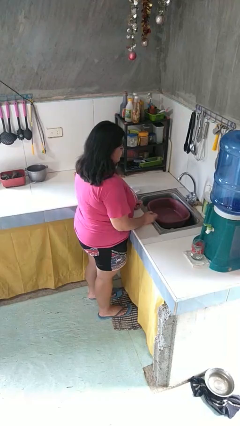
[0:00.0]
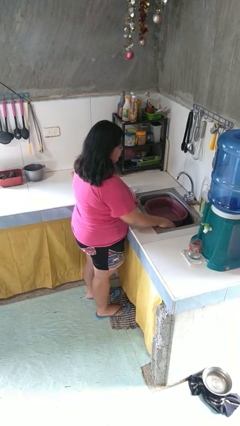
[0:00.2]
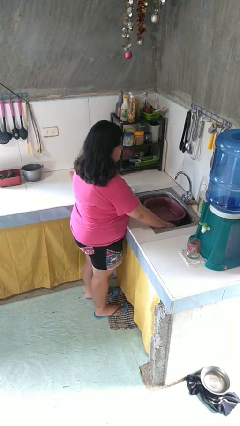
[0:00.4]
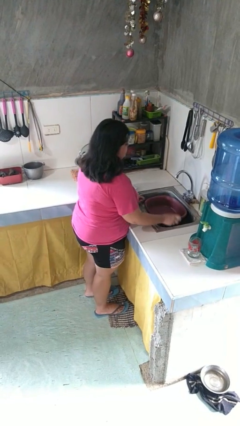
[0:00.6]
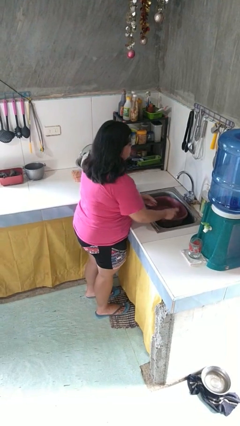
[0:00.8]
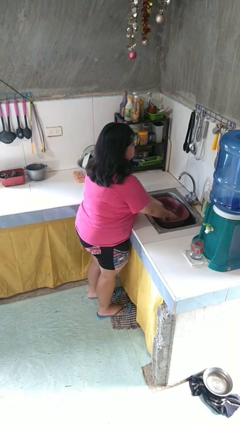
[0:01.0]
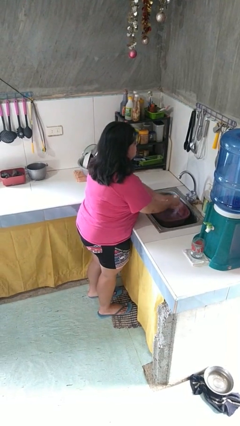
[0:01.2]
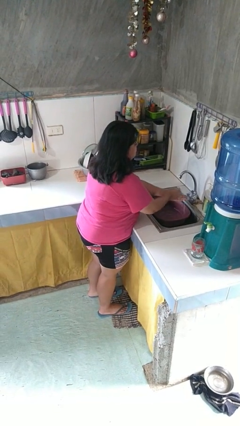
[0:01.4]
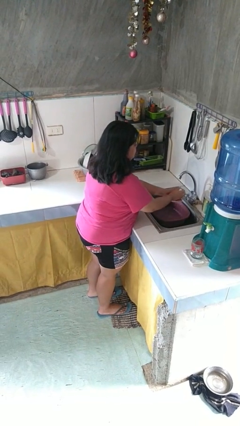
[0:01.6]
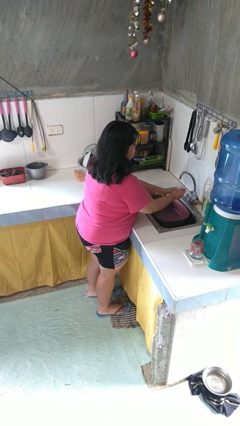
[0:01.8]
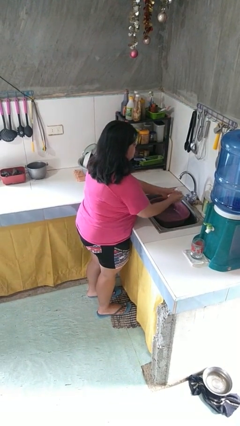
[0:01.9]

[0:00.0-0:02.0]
person washes hands

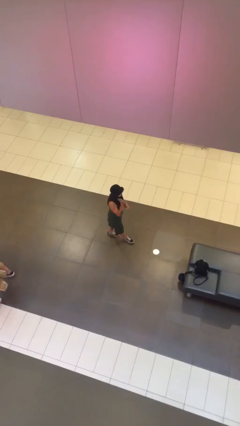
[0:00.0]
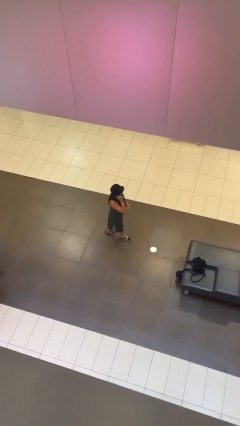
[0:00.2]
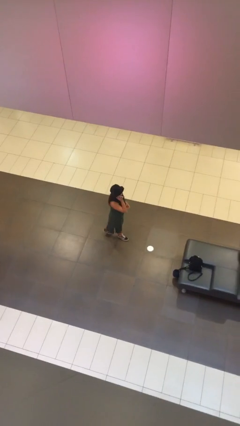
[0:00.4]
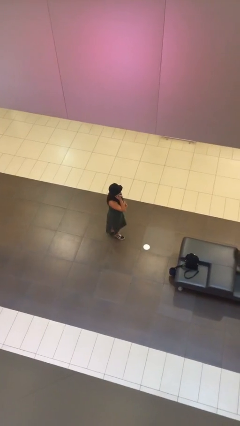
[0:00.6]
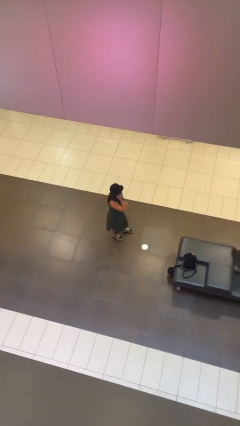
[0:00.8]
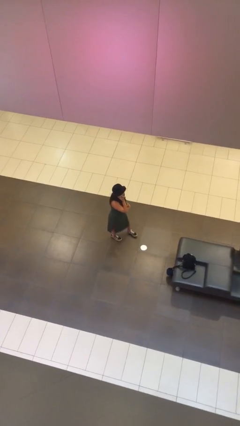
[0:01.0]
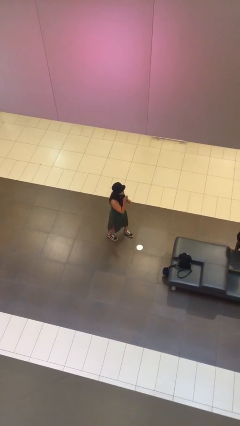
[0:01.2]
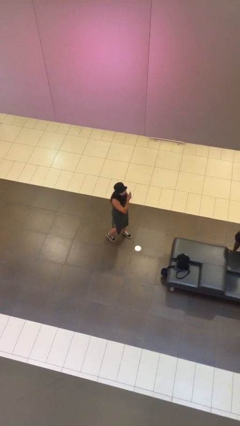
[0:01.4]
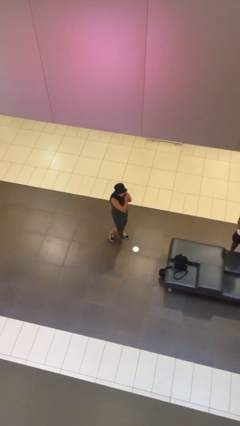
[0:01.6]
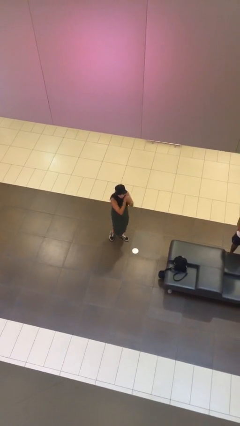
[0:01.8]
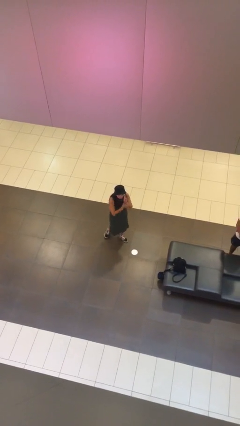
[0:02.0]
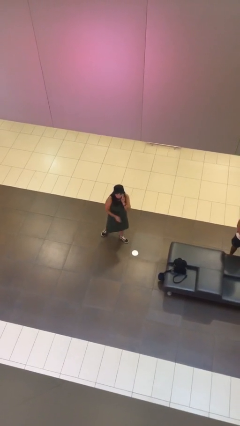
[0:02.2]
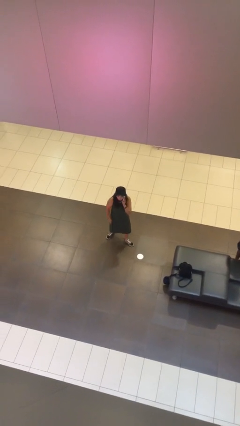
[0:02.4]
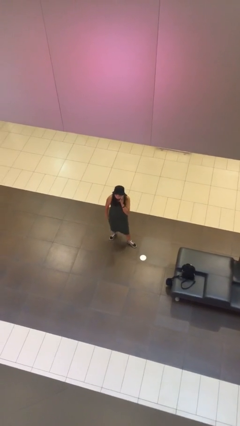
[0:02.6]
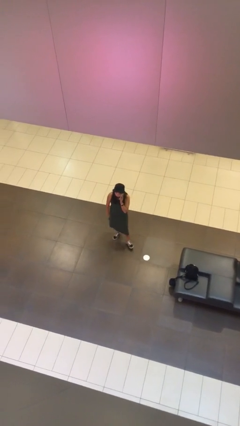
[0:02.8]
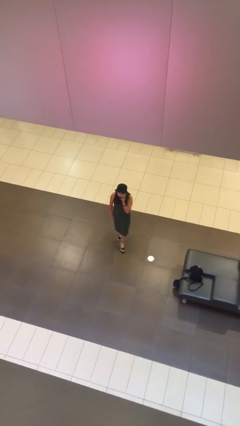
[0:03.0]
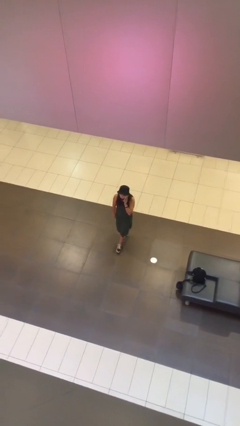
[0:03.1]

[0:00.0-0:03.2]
person talks on phone

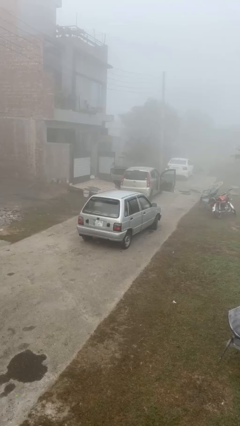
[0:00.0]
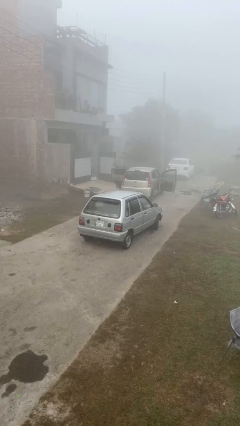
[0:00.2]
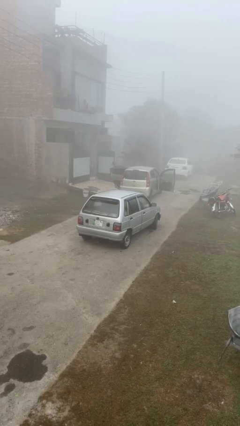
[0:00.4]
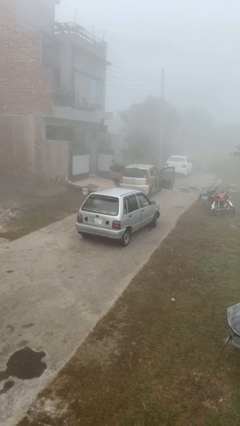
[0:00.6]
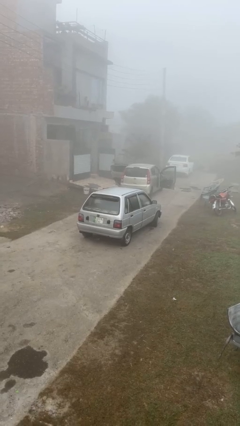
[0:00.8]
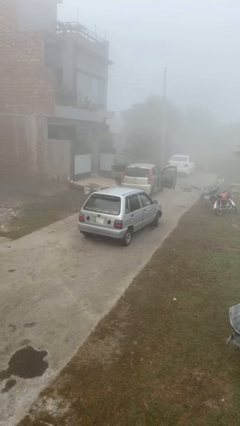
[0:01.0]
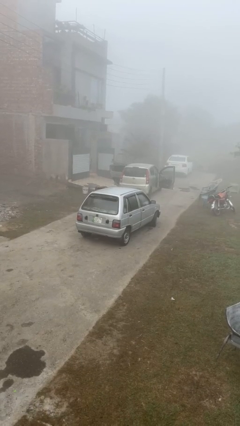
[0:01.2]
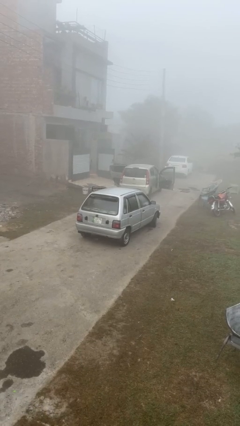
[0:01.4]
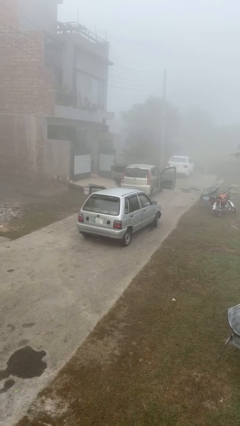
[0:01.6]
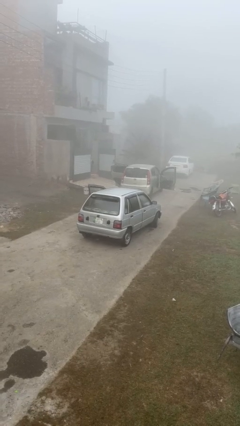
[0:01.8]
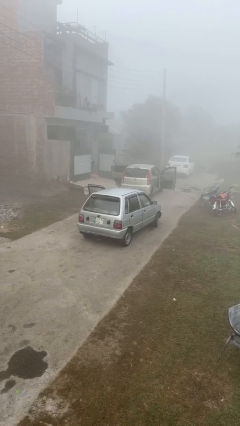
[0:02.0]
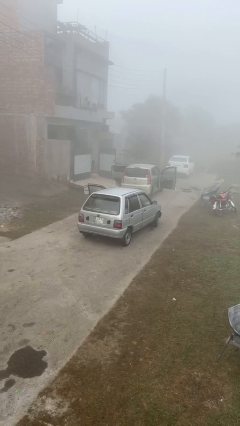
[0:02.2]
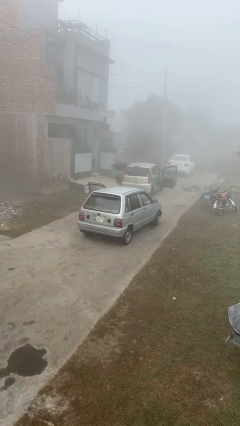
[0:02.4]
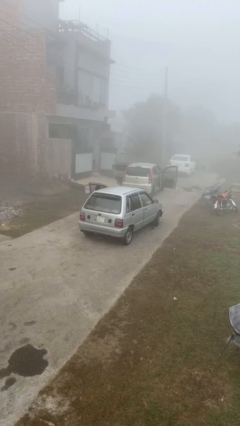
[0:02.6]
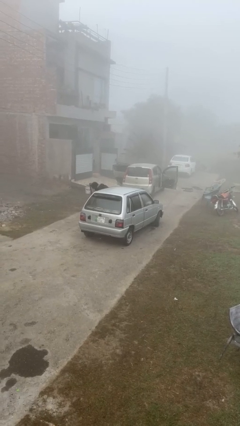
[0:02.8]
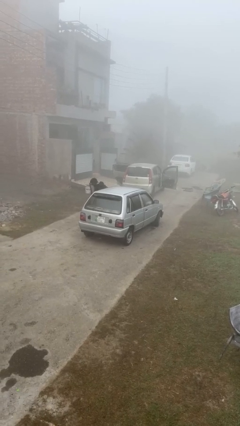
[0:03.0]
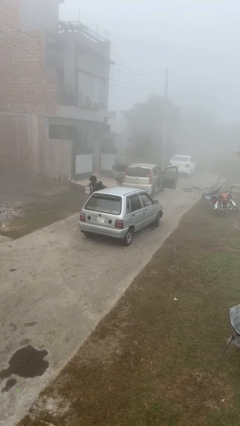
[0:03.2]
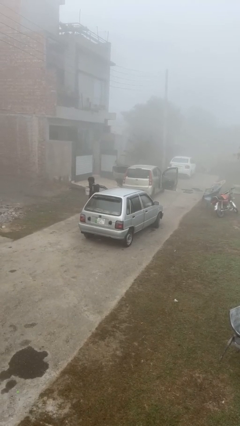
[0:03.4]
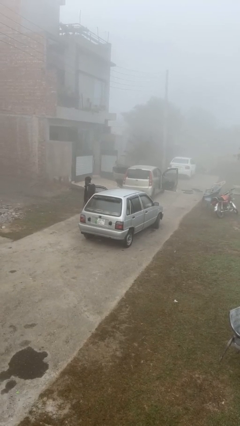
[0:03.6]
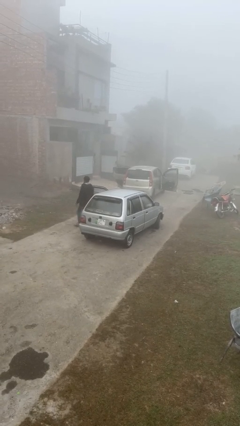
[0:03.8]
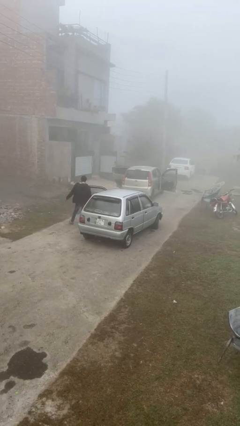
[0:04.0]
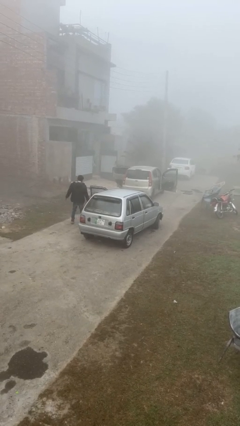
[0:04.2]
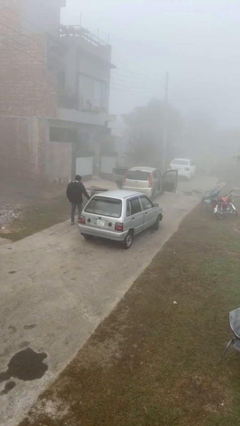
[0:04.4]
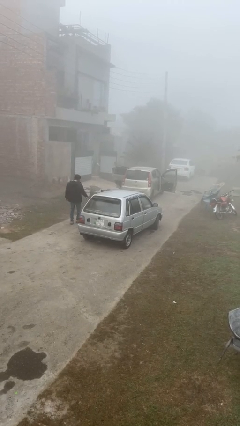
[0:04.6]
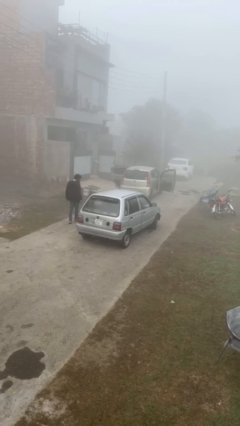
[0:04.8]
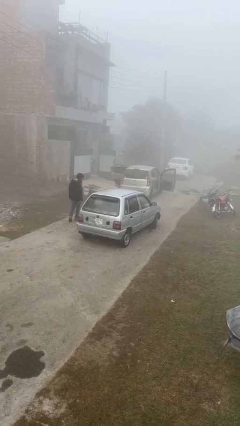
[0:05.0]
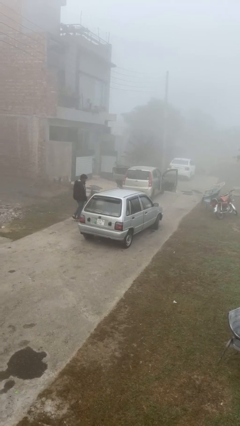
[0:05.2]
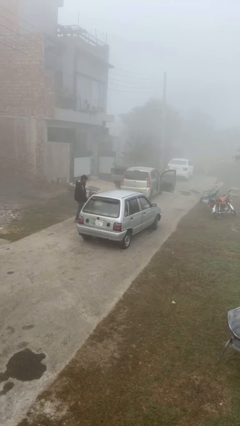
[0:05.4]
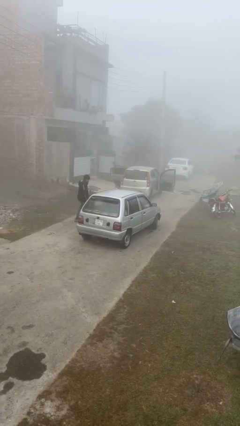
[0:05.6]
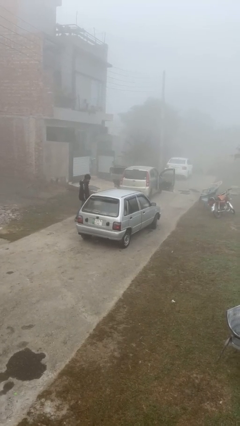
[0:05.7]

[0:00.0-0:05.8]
car drops off person

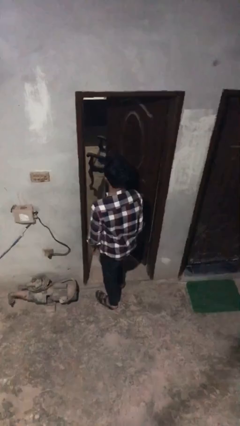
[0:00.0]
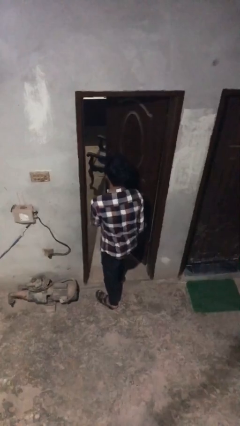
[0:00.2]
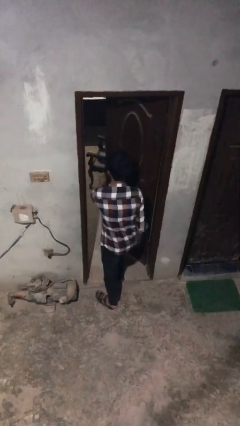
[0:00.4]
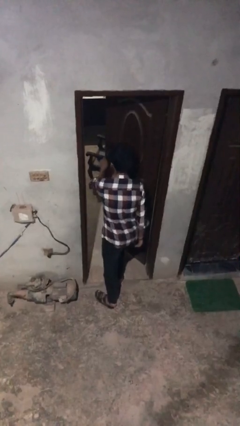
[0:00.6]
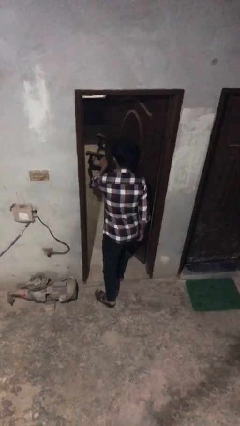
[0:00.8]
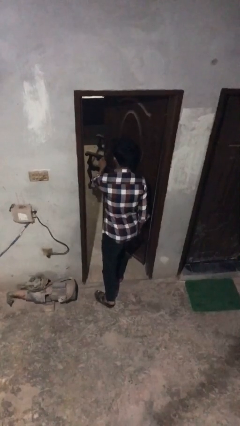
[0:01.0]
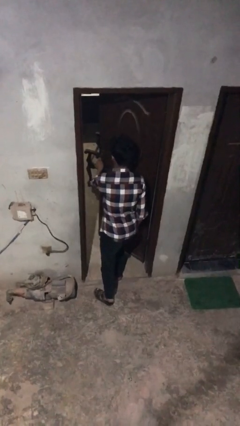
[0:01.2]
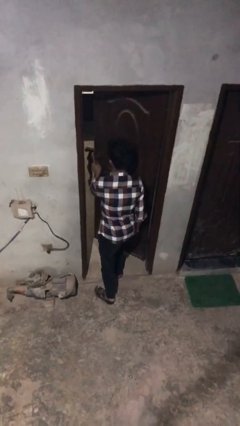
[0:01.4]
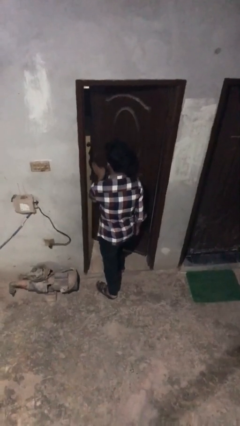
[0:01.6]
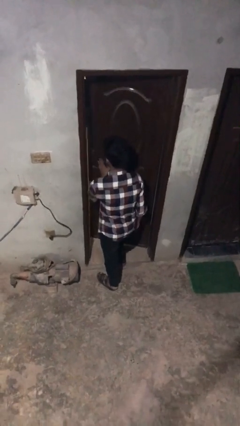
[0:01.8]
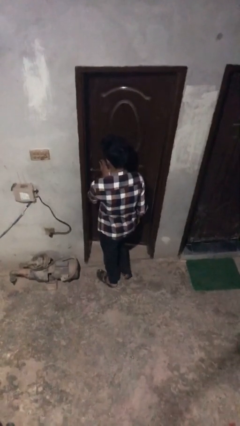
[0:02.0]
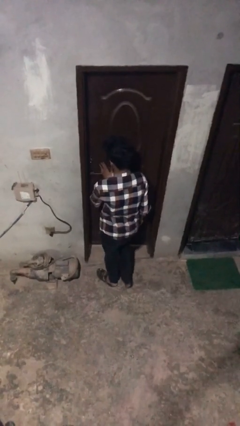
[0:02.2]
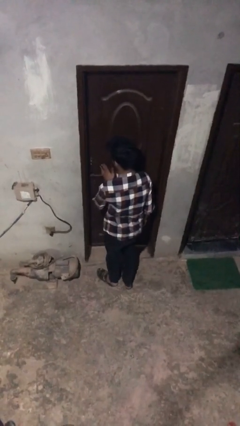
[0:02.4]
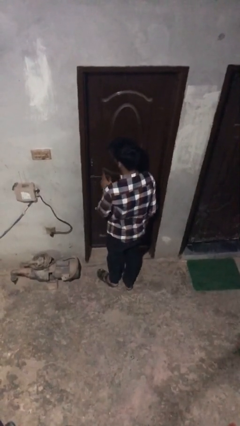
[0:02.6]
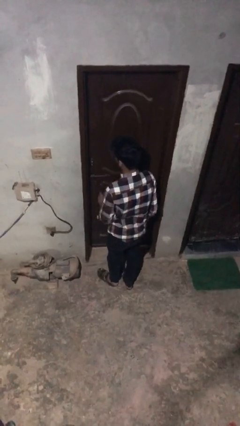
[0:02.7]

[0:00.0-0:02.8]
person closes facility door

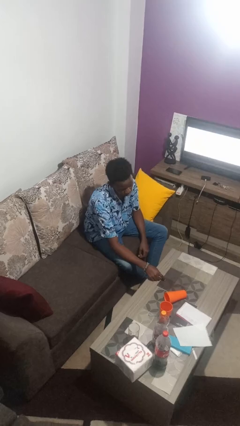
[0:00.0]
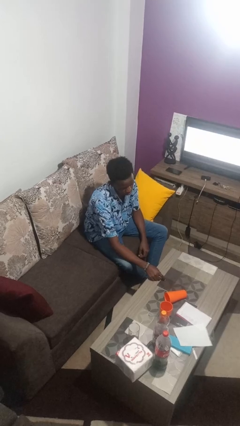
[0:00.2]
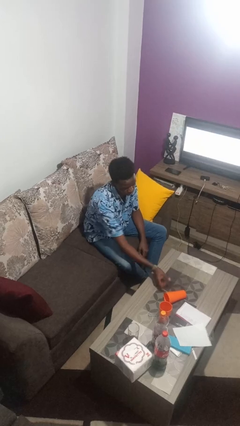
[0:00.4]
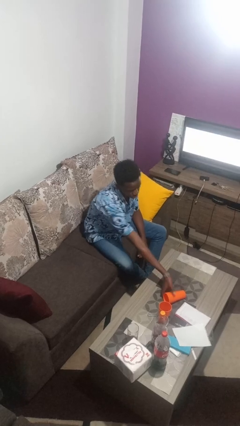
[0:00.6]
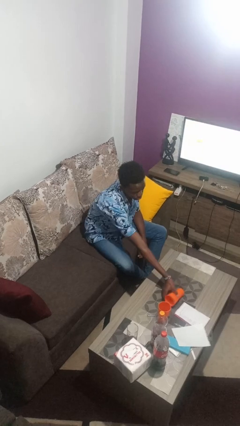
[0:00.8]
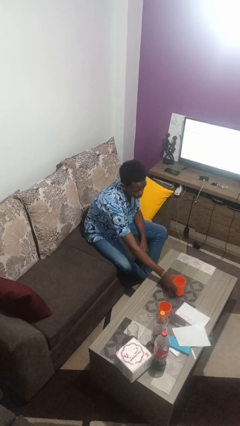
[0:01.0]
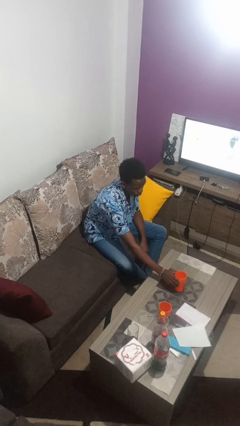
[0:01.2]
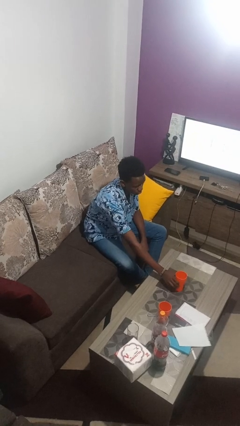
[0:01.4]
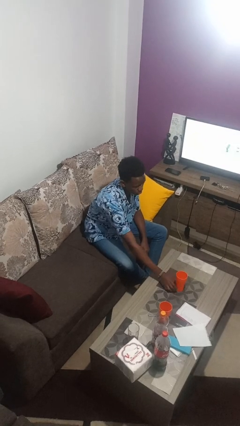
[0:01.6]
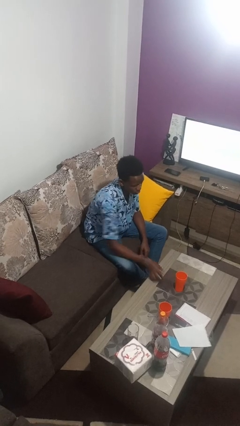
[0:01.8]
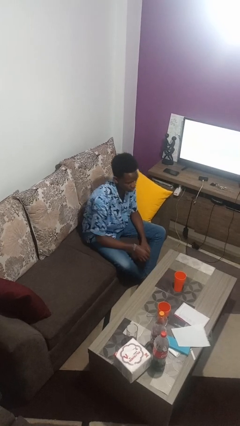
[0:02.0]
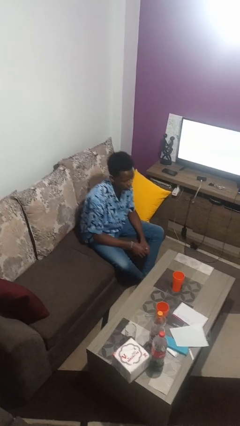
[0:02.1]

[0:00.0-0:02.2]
person sets upright glass

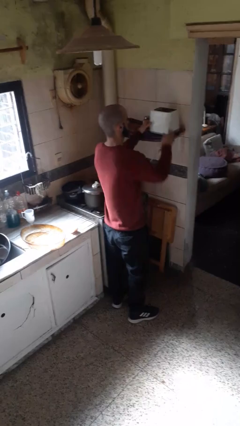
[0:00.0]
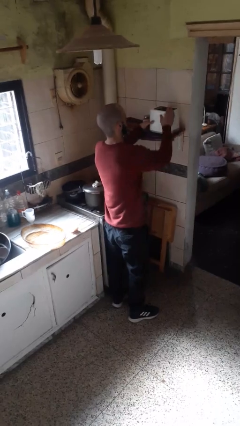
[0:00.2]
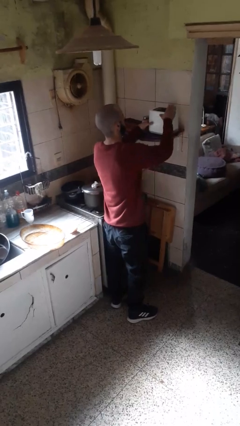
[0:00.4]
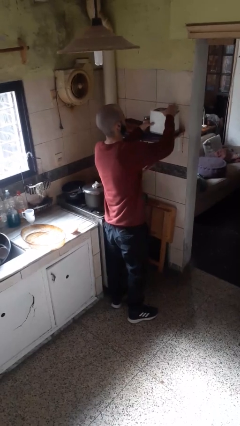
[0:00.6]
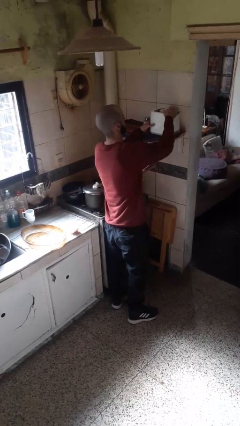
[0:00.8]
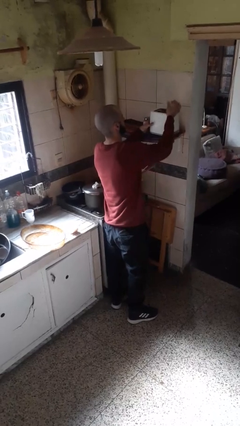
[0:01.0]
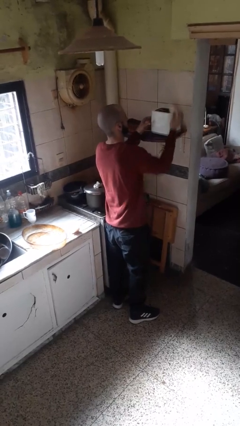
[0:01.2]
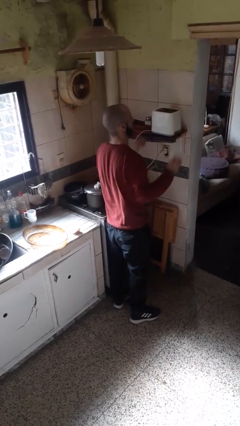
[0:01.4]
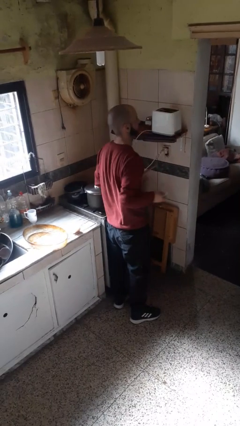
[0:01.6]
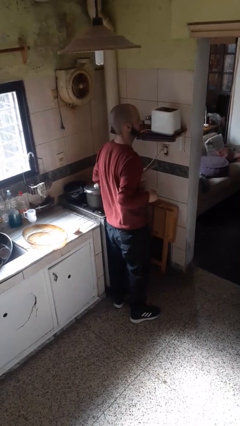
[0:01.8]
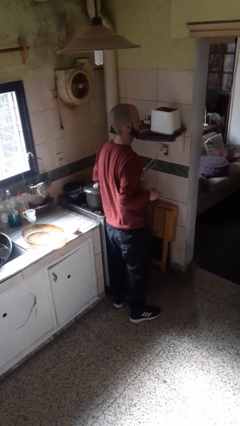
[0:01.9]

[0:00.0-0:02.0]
person takes object from toaster
